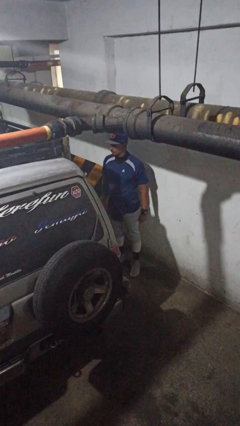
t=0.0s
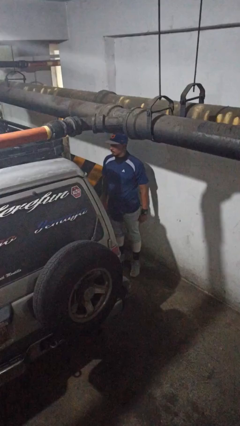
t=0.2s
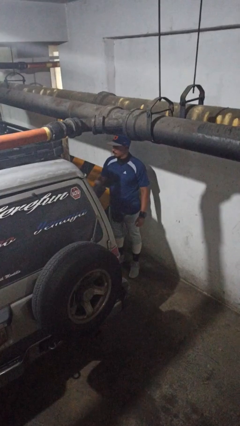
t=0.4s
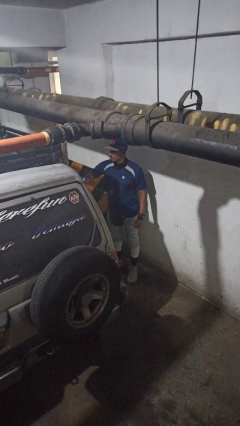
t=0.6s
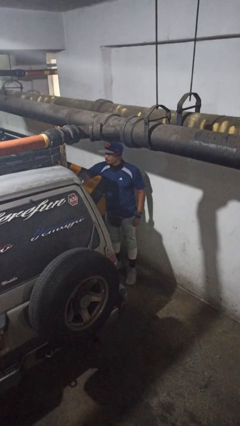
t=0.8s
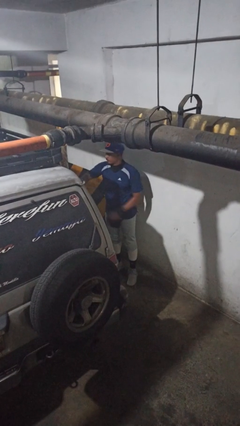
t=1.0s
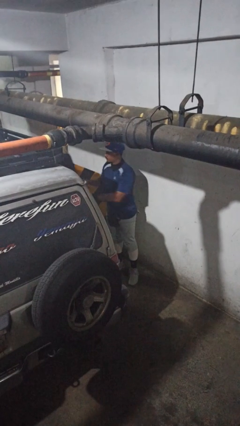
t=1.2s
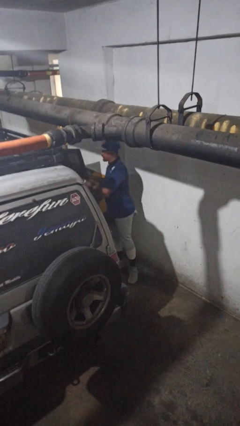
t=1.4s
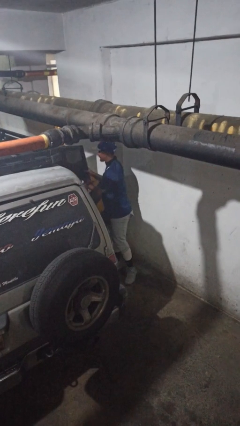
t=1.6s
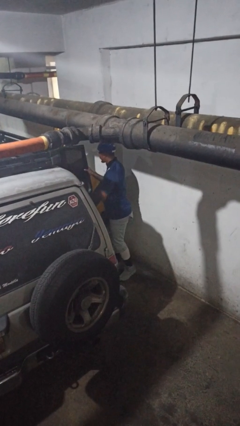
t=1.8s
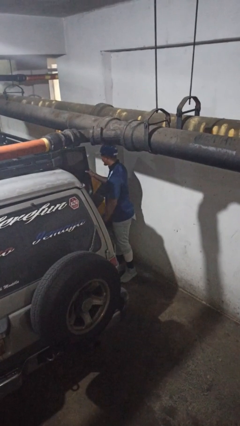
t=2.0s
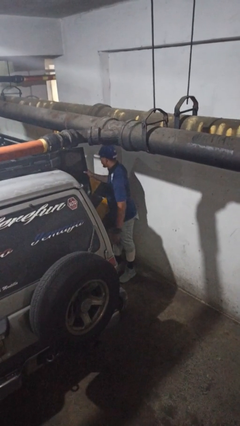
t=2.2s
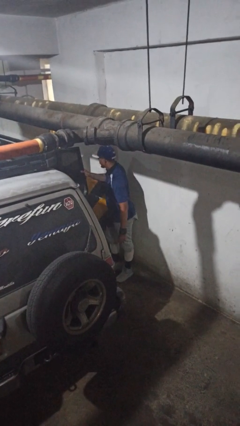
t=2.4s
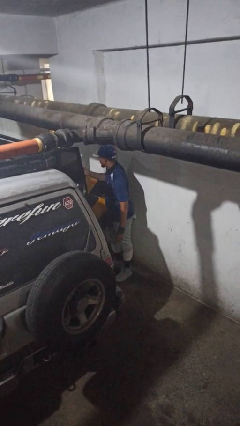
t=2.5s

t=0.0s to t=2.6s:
person opens car door

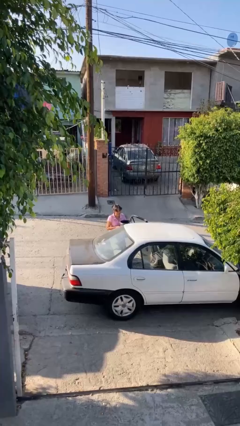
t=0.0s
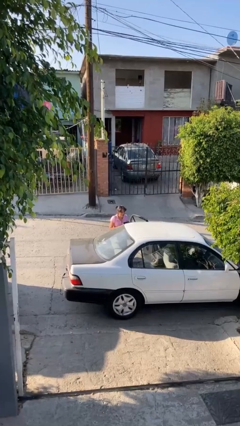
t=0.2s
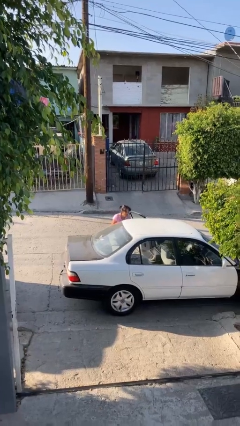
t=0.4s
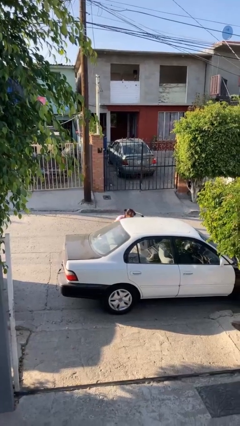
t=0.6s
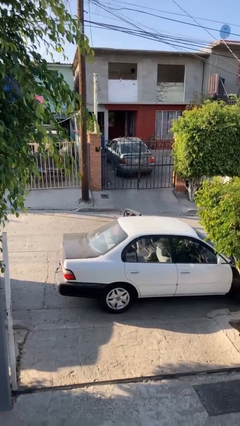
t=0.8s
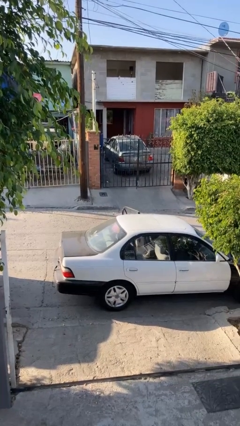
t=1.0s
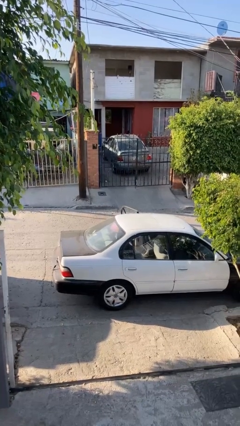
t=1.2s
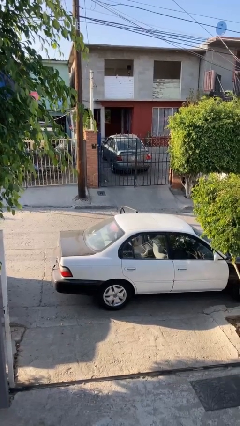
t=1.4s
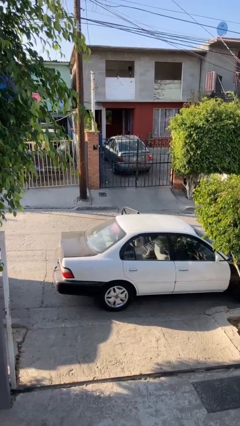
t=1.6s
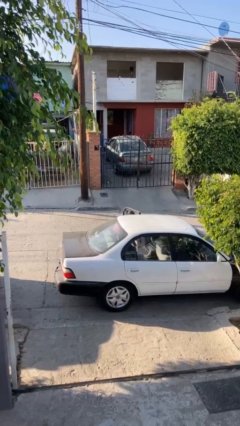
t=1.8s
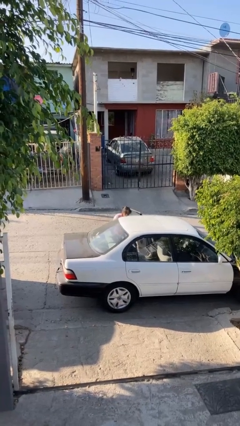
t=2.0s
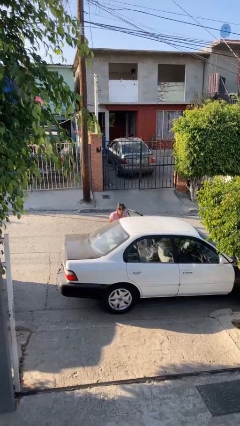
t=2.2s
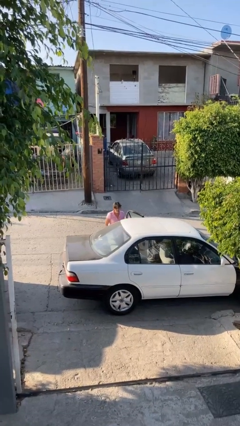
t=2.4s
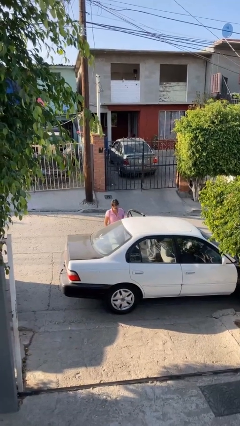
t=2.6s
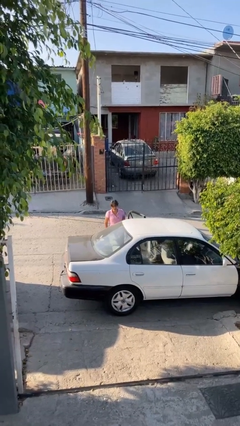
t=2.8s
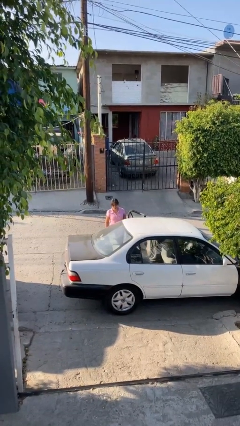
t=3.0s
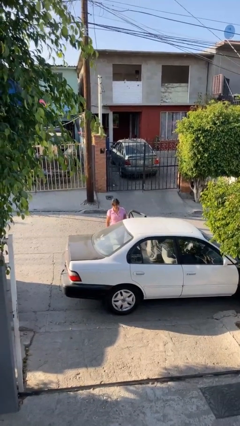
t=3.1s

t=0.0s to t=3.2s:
person loads car

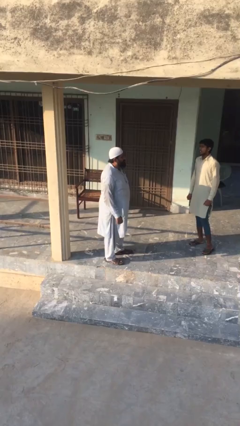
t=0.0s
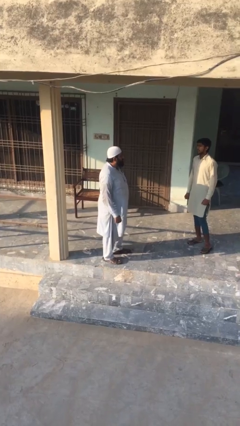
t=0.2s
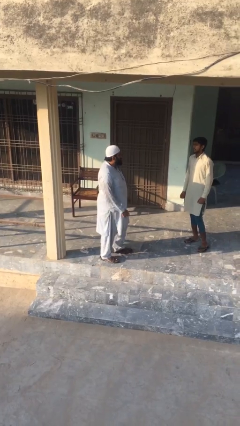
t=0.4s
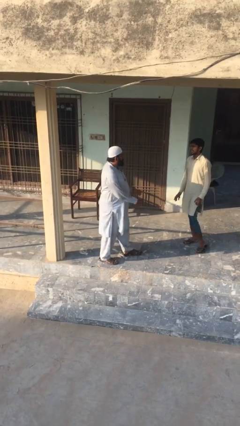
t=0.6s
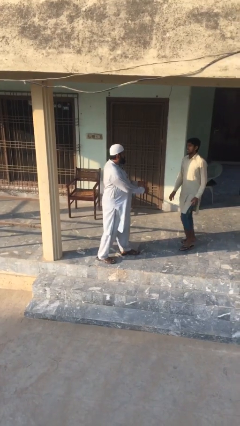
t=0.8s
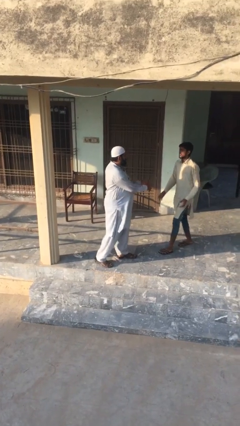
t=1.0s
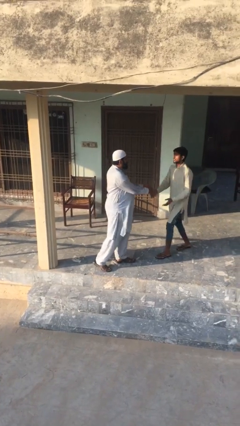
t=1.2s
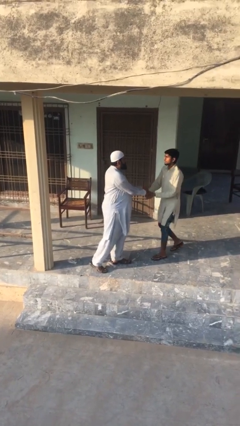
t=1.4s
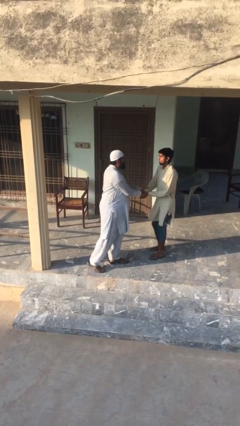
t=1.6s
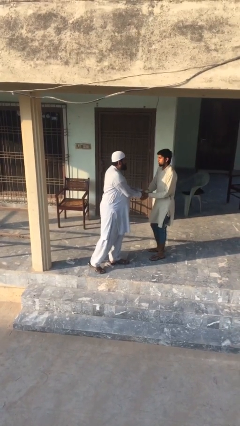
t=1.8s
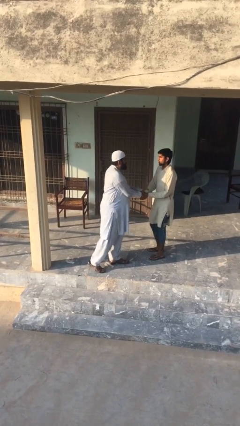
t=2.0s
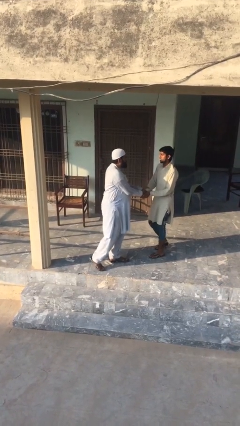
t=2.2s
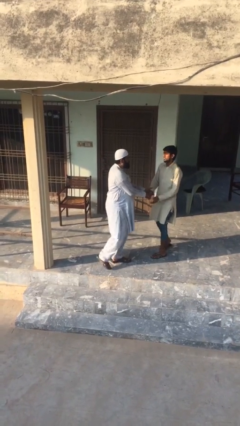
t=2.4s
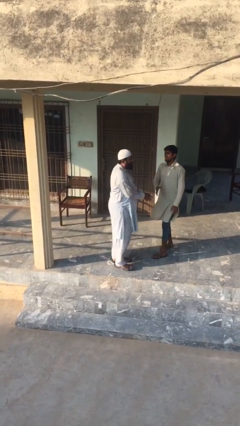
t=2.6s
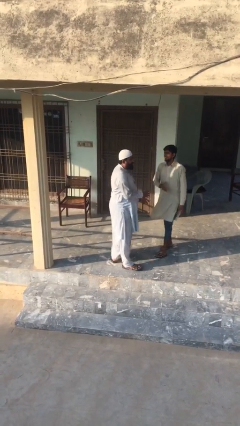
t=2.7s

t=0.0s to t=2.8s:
person shakes hand

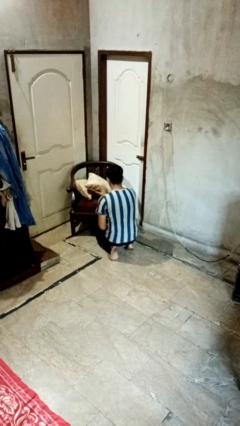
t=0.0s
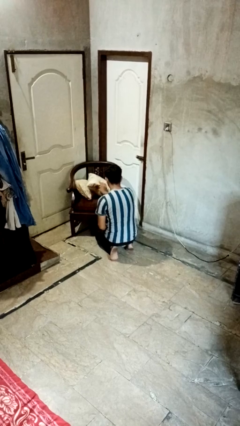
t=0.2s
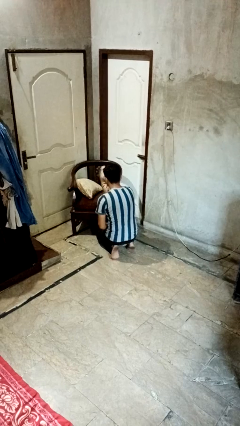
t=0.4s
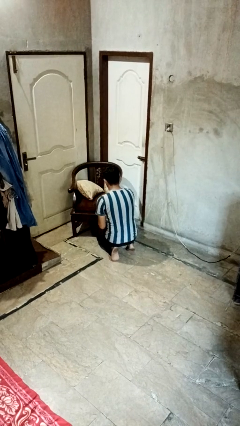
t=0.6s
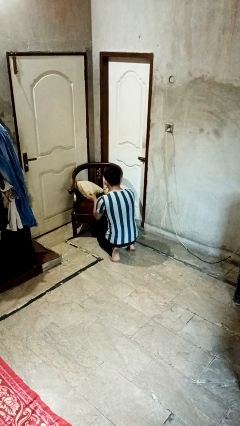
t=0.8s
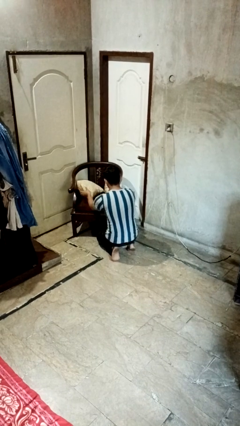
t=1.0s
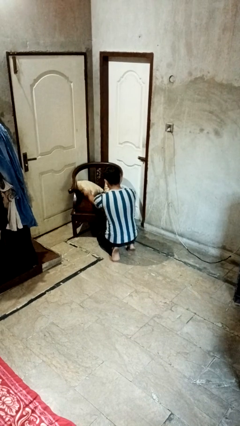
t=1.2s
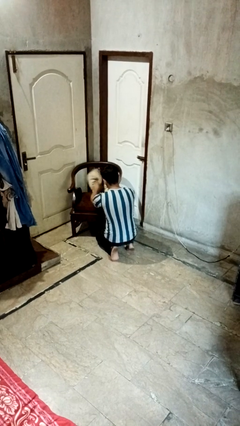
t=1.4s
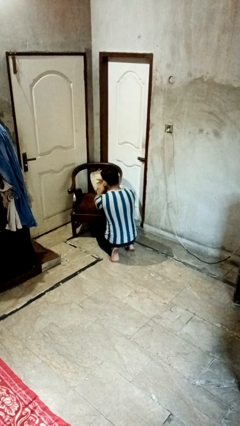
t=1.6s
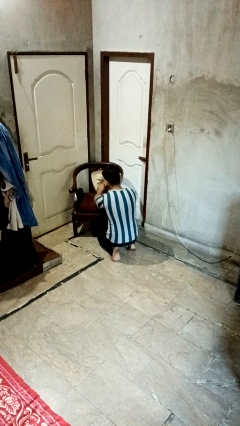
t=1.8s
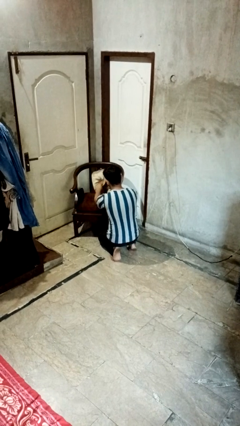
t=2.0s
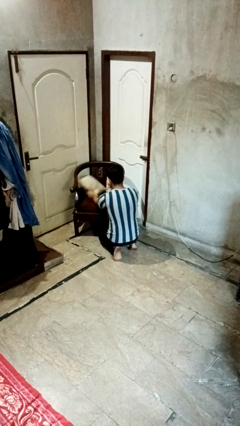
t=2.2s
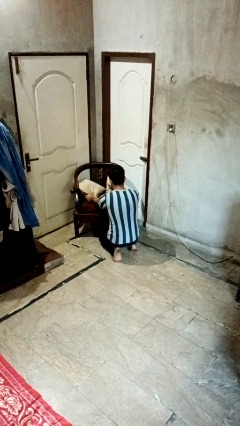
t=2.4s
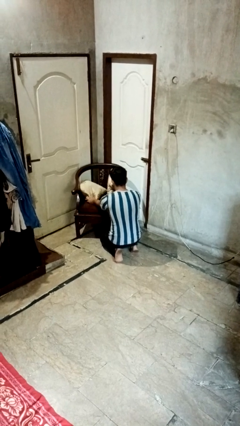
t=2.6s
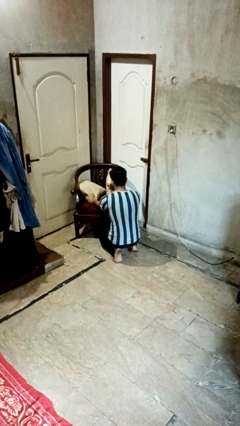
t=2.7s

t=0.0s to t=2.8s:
person searches in couch

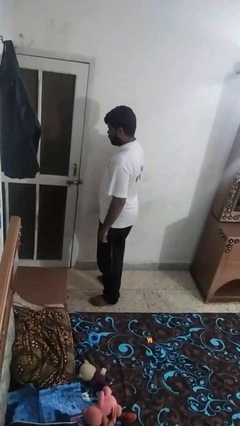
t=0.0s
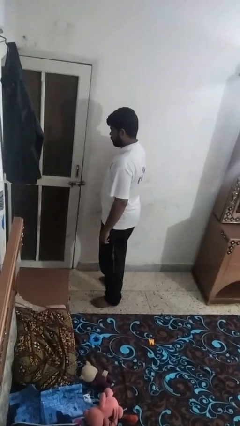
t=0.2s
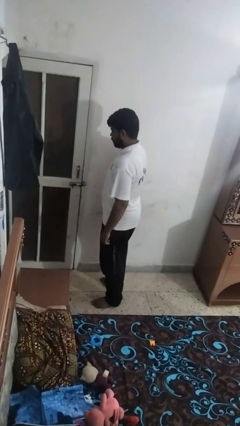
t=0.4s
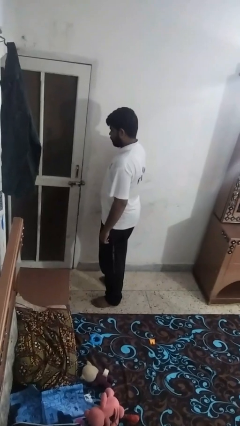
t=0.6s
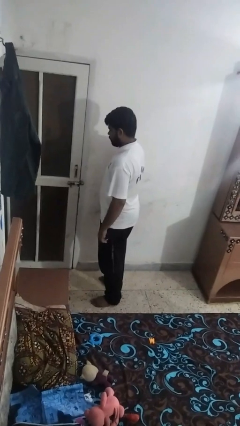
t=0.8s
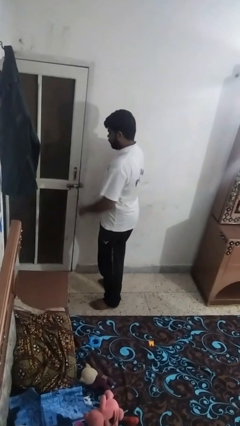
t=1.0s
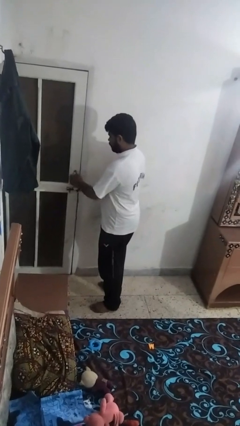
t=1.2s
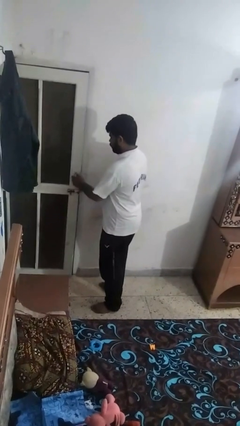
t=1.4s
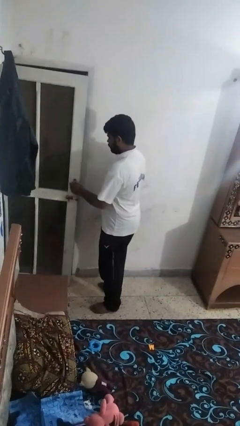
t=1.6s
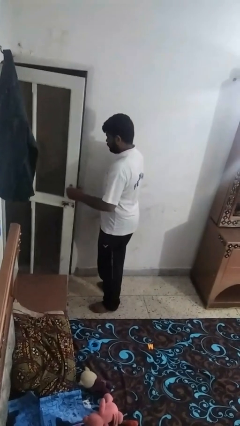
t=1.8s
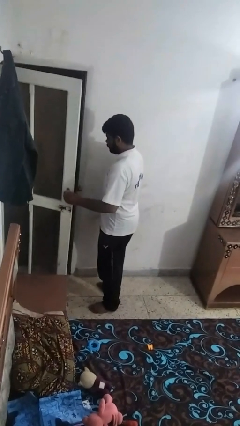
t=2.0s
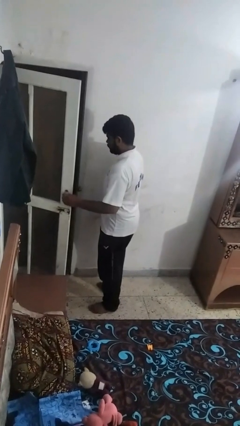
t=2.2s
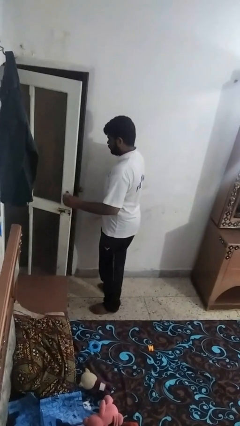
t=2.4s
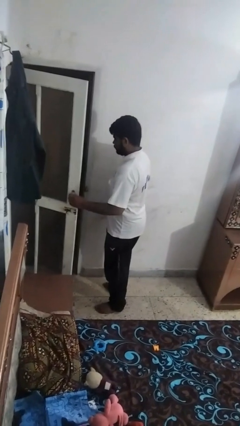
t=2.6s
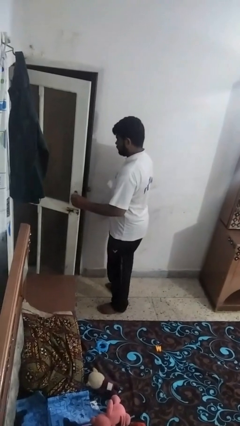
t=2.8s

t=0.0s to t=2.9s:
person opens facility door

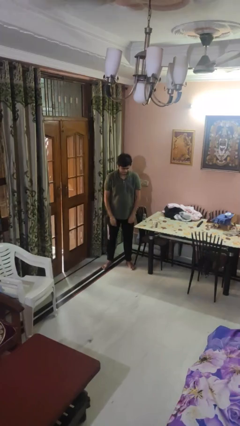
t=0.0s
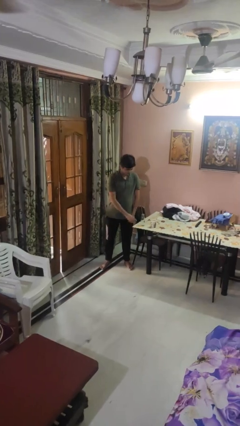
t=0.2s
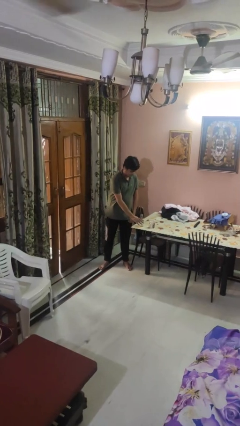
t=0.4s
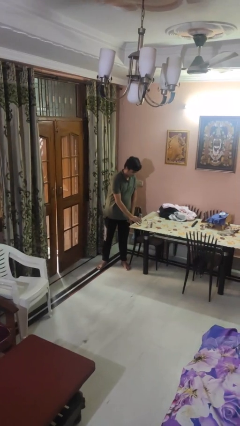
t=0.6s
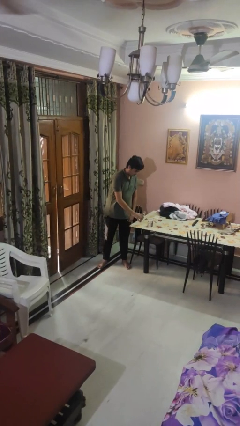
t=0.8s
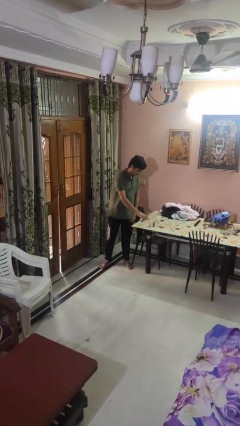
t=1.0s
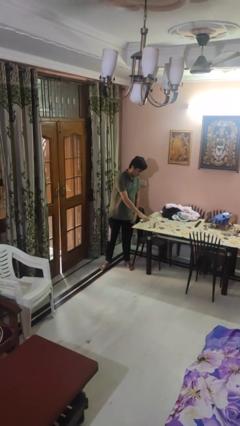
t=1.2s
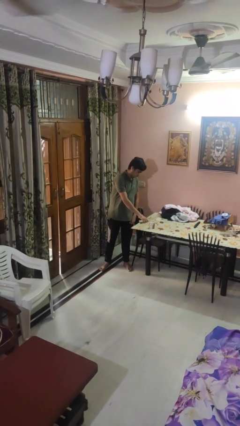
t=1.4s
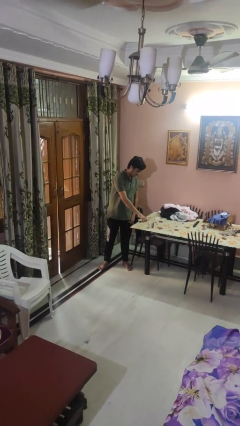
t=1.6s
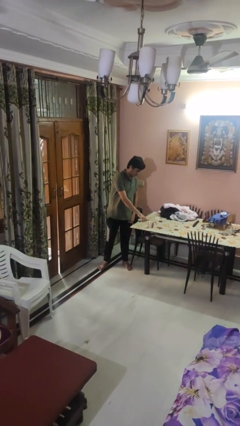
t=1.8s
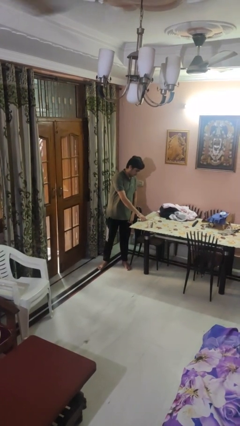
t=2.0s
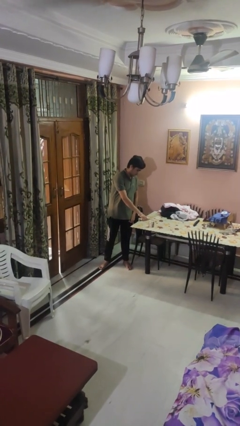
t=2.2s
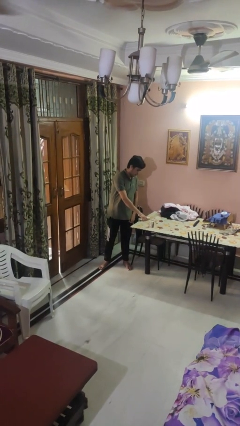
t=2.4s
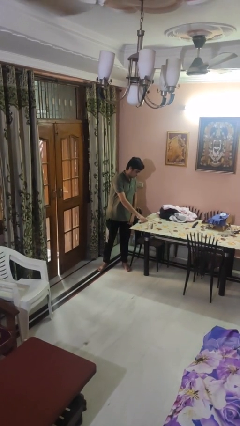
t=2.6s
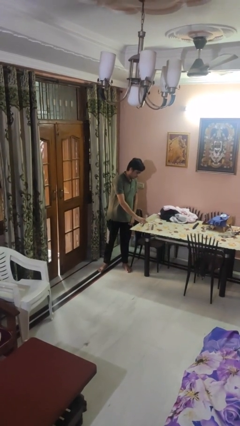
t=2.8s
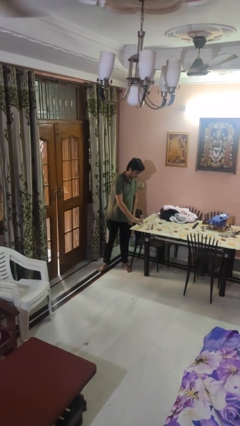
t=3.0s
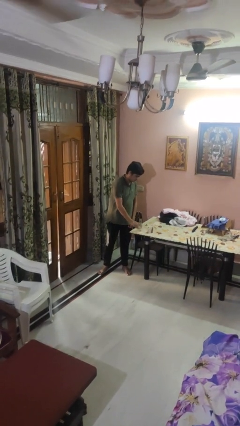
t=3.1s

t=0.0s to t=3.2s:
person pours liquid into cup
